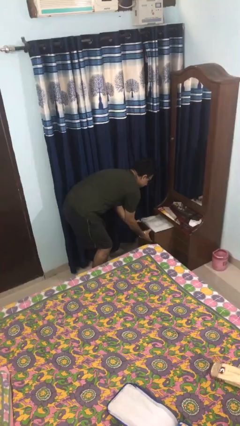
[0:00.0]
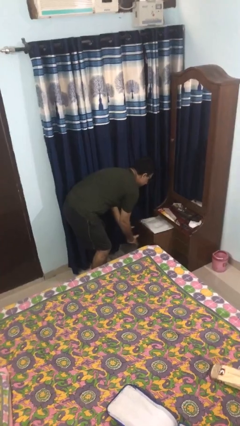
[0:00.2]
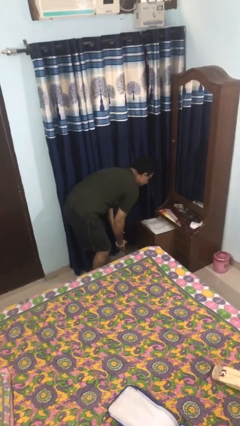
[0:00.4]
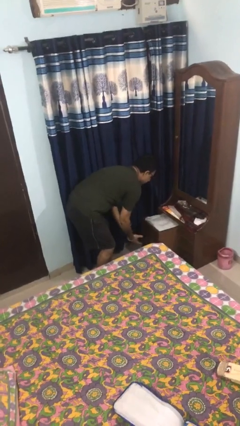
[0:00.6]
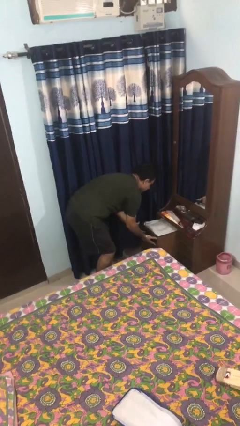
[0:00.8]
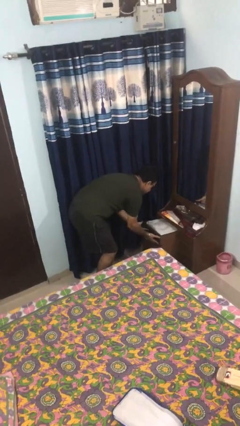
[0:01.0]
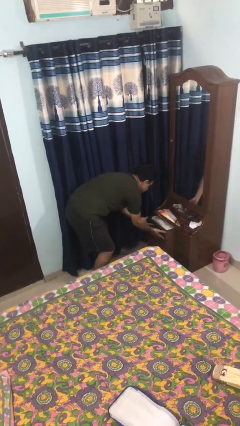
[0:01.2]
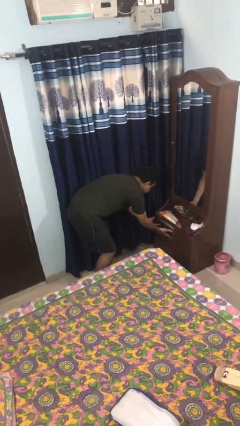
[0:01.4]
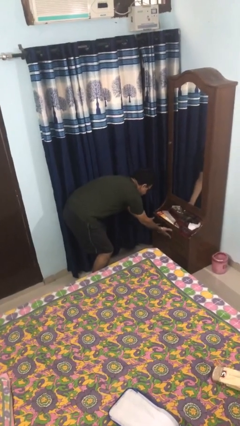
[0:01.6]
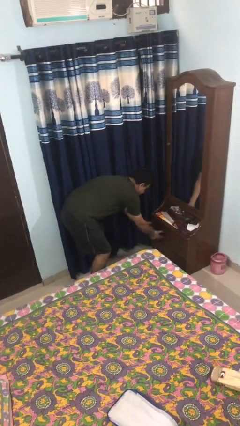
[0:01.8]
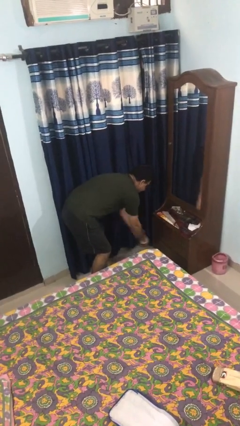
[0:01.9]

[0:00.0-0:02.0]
person closes dresser drawer

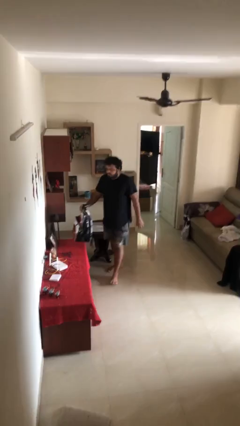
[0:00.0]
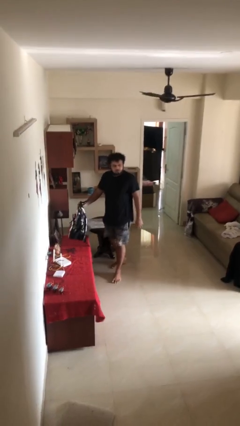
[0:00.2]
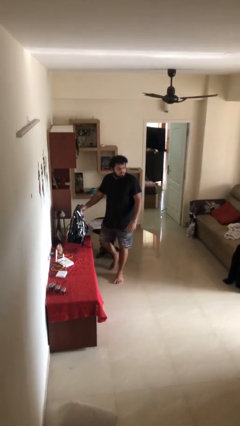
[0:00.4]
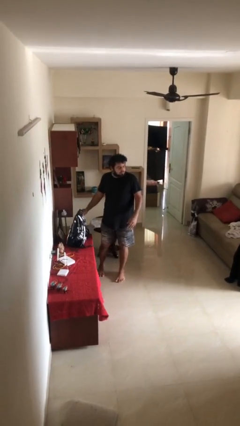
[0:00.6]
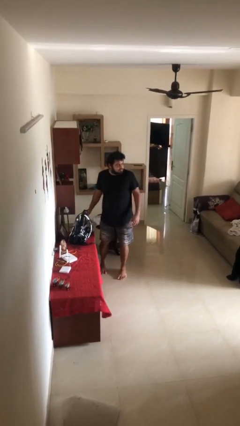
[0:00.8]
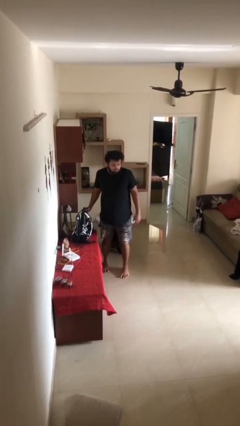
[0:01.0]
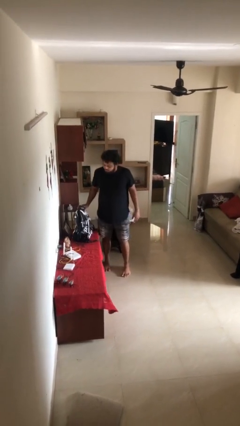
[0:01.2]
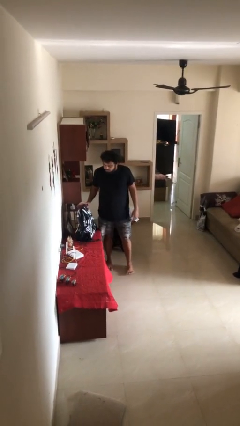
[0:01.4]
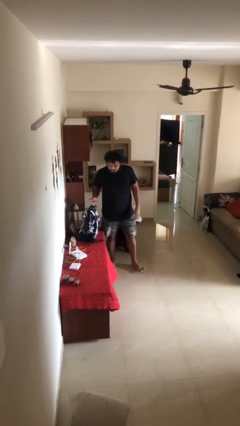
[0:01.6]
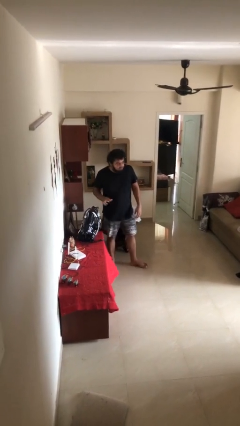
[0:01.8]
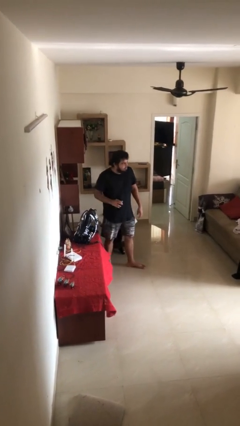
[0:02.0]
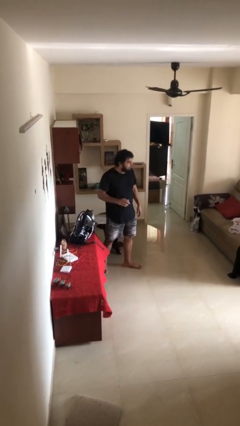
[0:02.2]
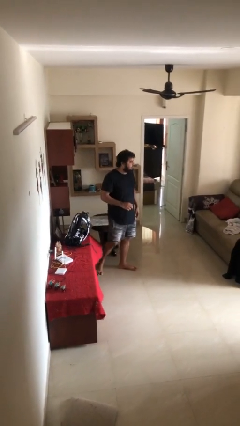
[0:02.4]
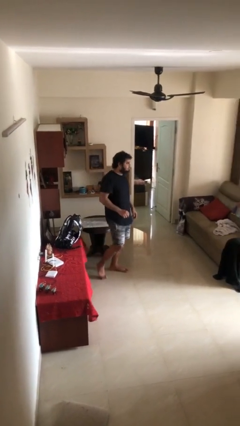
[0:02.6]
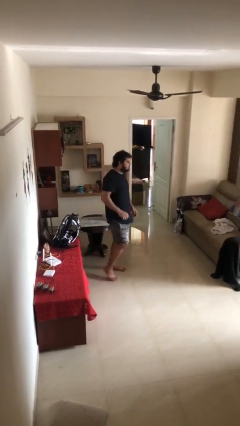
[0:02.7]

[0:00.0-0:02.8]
person puts down object on table

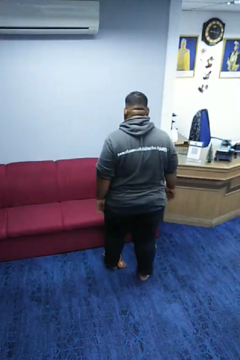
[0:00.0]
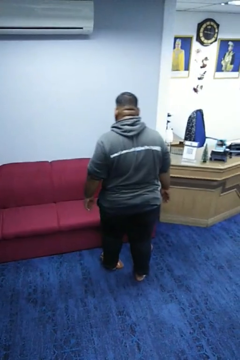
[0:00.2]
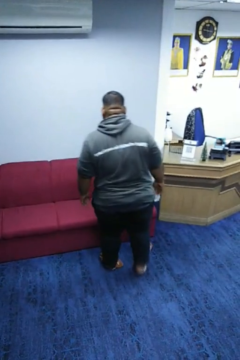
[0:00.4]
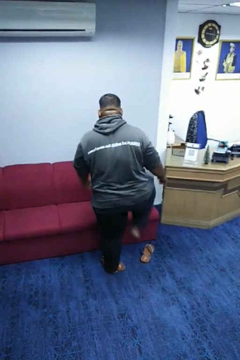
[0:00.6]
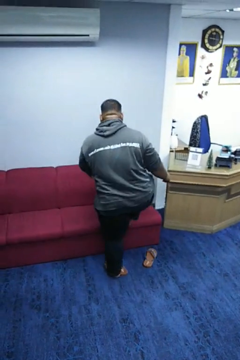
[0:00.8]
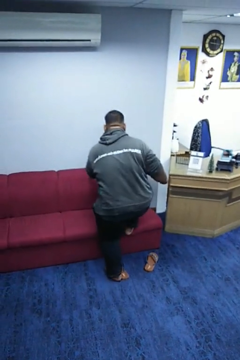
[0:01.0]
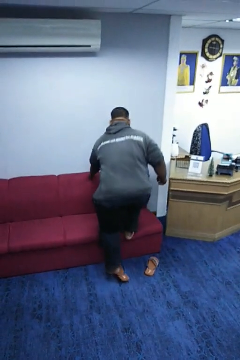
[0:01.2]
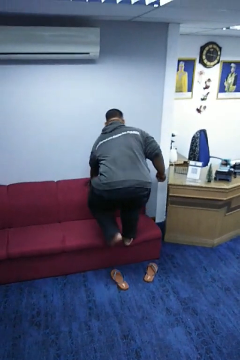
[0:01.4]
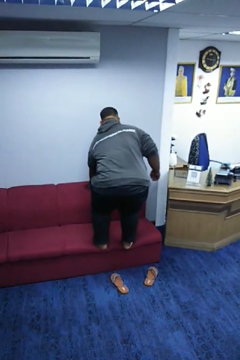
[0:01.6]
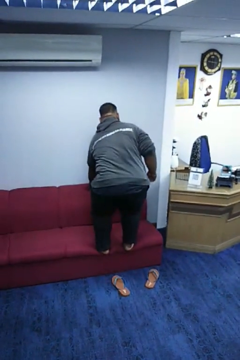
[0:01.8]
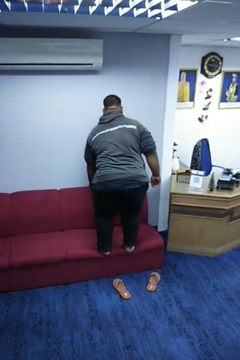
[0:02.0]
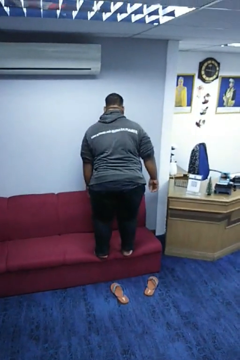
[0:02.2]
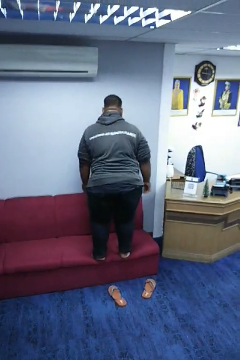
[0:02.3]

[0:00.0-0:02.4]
person climbs on couch

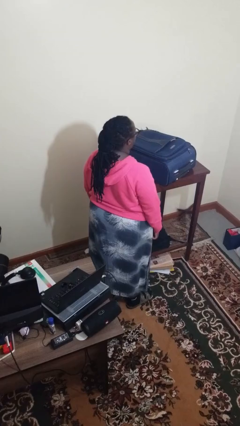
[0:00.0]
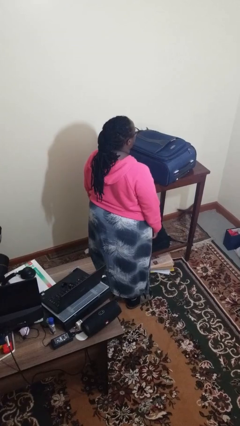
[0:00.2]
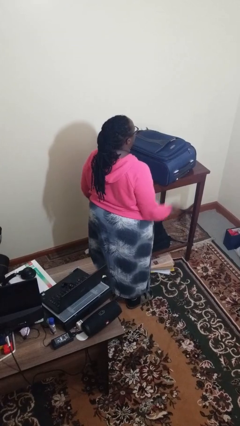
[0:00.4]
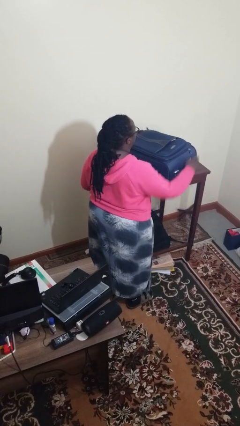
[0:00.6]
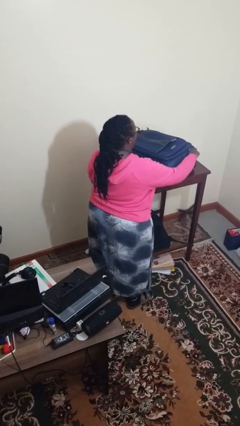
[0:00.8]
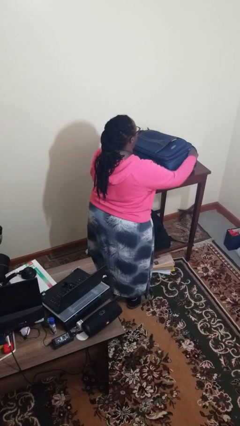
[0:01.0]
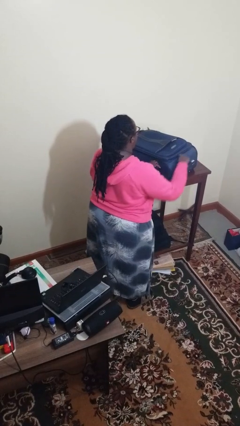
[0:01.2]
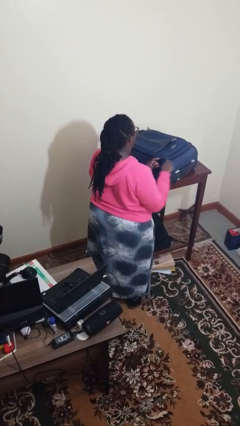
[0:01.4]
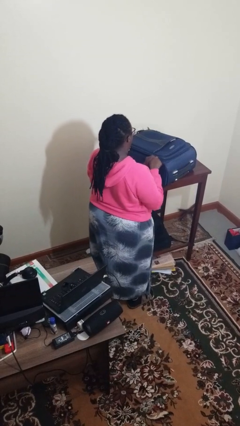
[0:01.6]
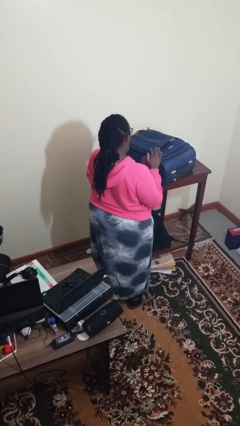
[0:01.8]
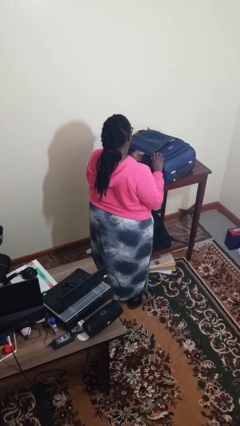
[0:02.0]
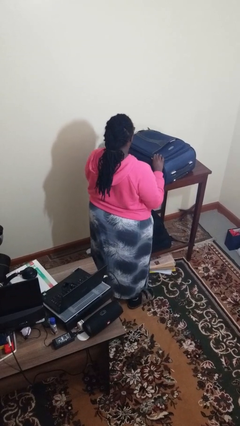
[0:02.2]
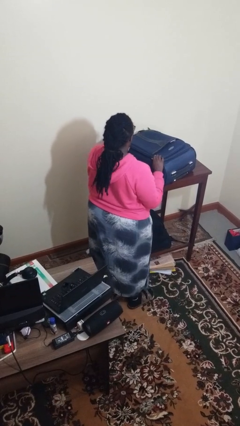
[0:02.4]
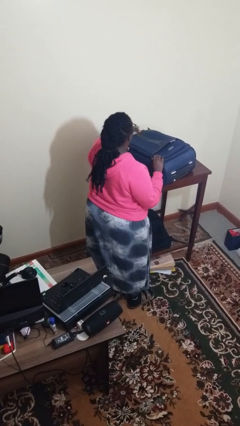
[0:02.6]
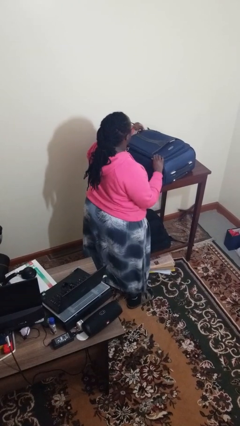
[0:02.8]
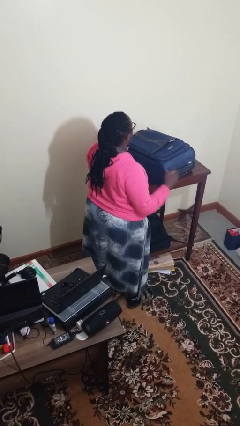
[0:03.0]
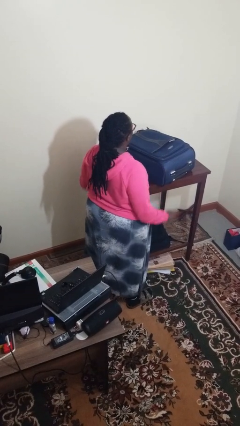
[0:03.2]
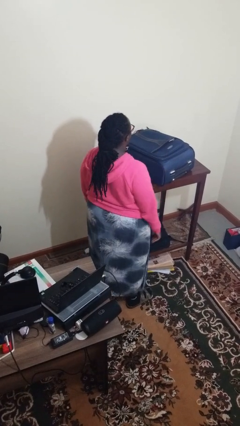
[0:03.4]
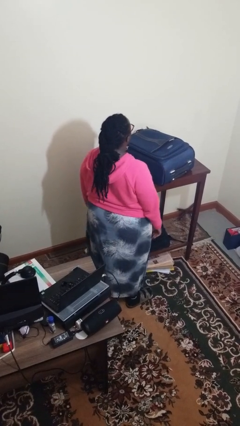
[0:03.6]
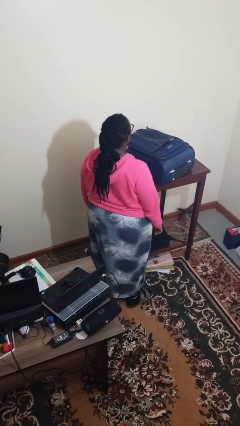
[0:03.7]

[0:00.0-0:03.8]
person closes suitcase

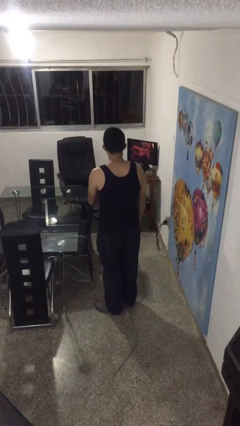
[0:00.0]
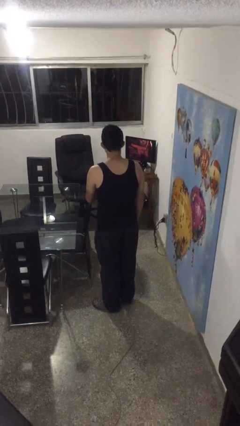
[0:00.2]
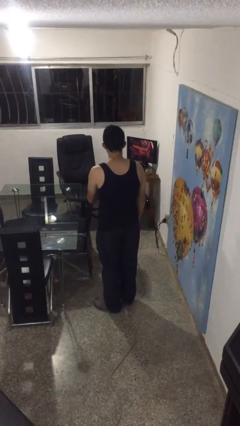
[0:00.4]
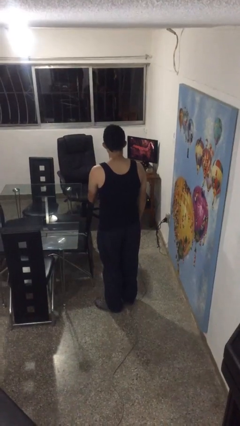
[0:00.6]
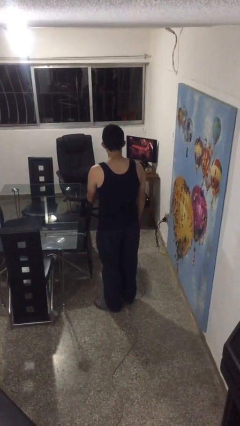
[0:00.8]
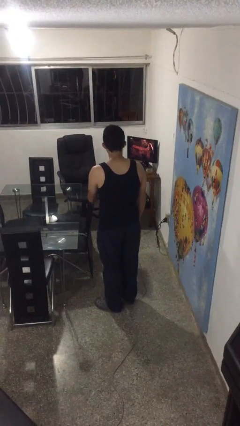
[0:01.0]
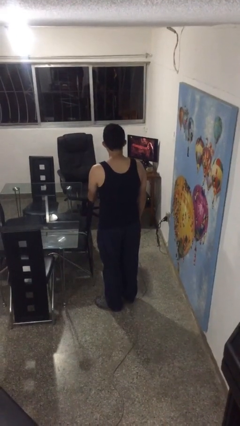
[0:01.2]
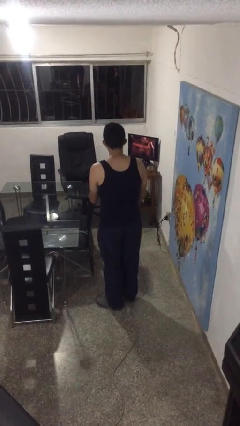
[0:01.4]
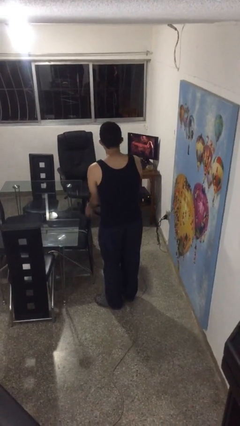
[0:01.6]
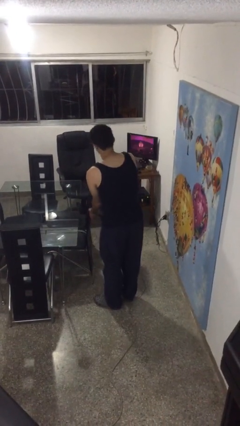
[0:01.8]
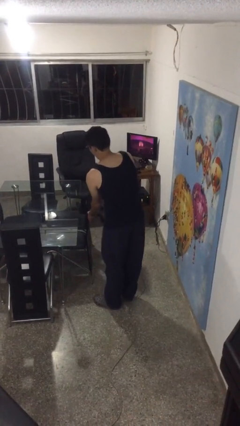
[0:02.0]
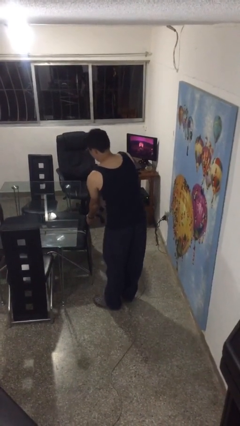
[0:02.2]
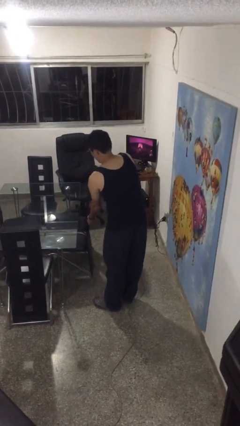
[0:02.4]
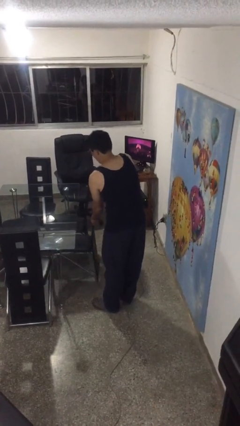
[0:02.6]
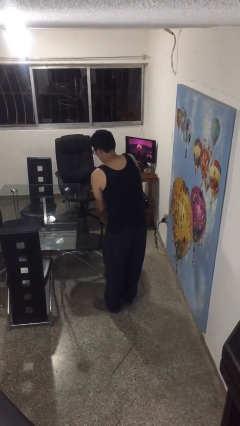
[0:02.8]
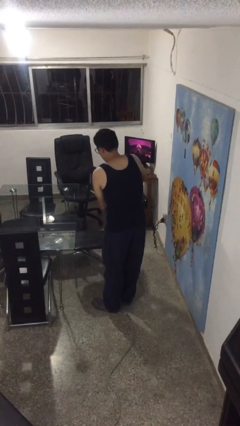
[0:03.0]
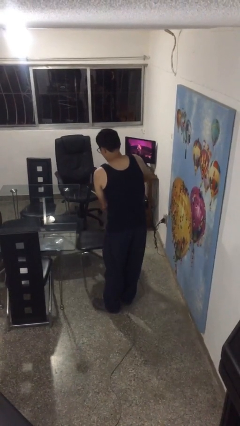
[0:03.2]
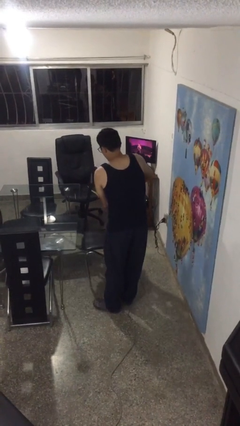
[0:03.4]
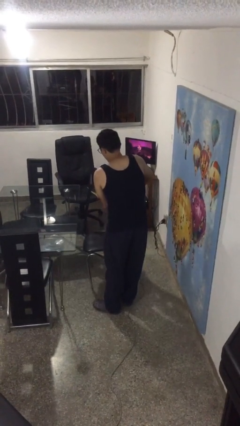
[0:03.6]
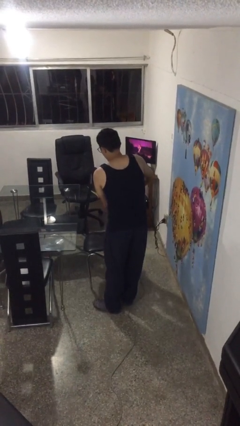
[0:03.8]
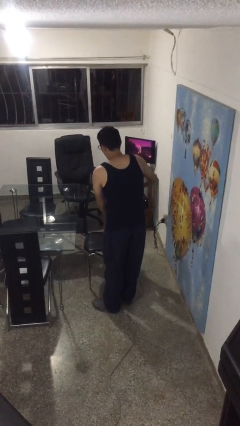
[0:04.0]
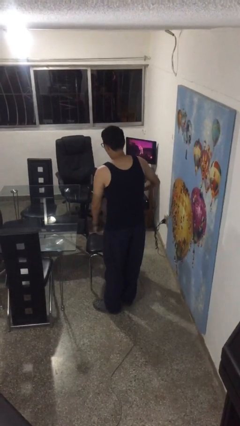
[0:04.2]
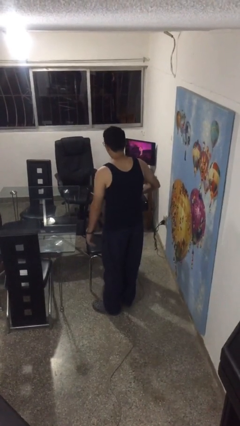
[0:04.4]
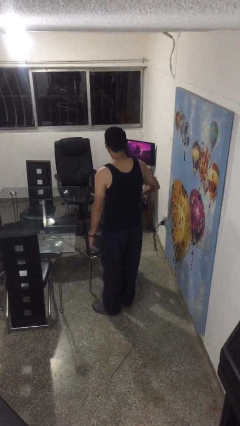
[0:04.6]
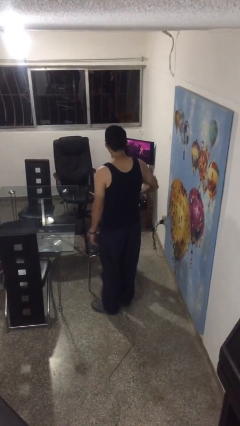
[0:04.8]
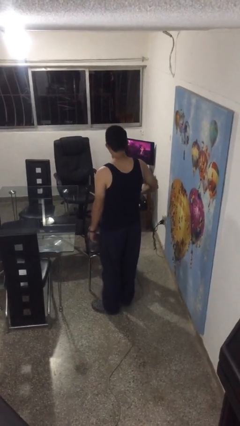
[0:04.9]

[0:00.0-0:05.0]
person pulls out chair

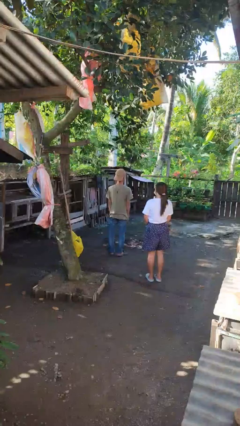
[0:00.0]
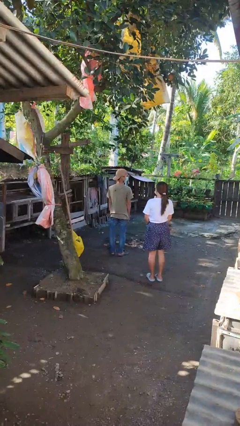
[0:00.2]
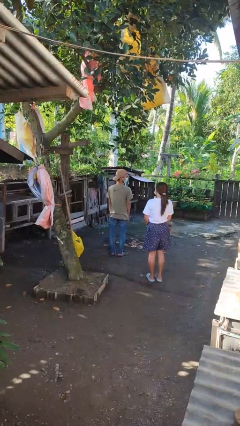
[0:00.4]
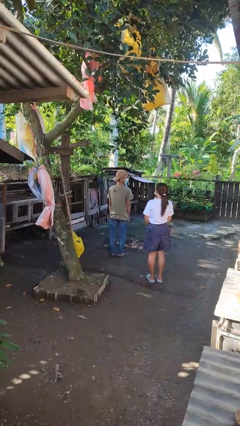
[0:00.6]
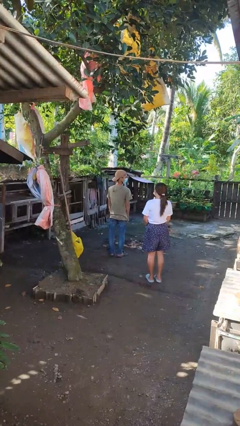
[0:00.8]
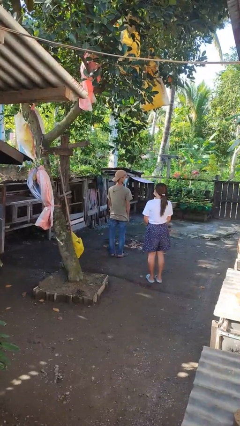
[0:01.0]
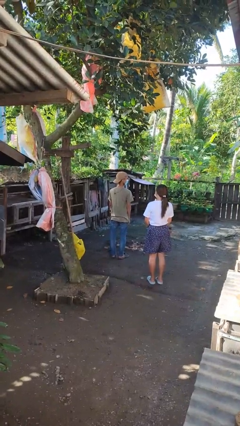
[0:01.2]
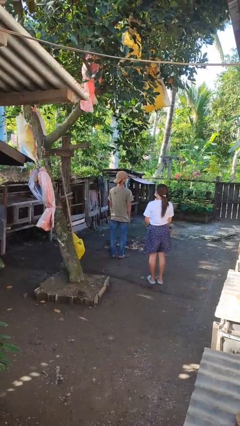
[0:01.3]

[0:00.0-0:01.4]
person looks over shoulder

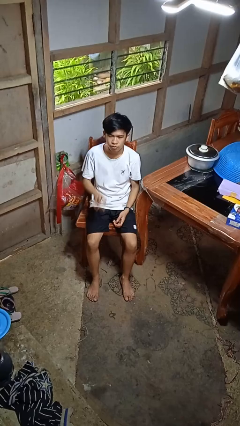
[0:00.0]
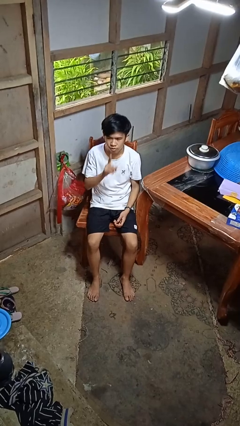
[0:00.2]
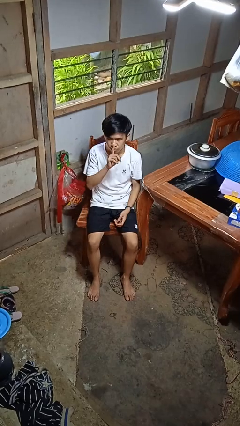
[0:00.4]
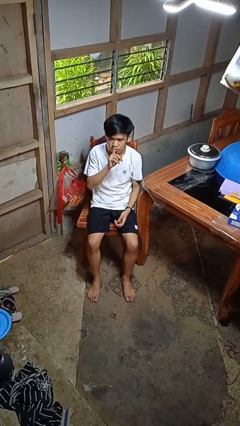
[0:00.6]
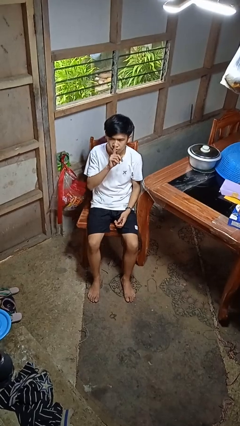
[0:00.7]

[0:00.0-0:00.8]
person gestures be quiet
